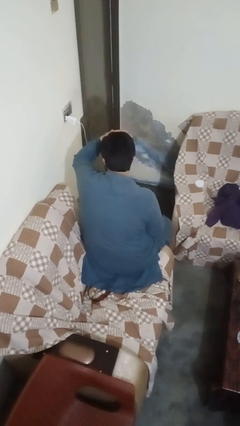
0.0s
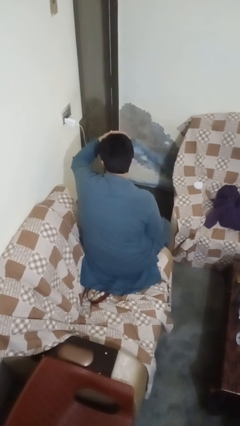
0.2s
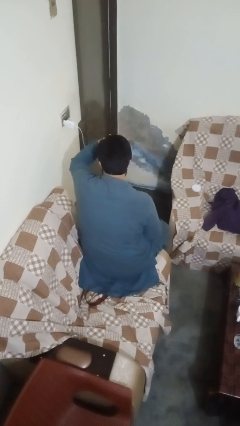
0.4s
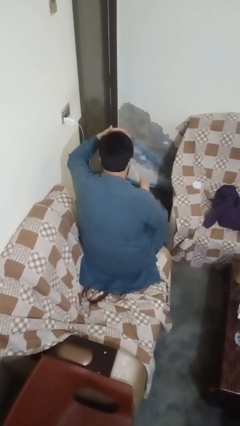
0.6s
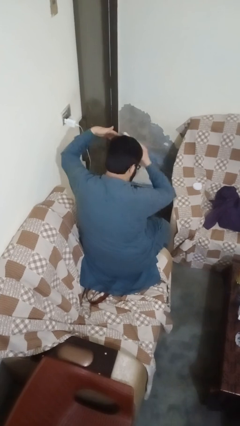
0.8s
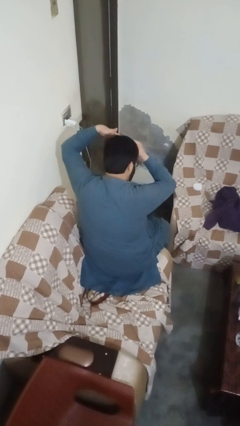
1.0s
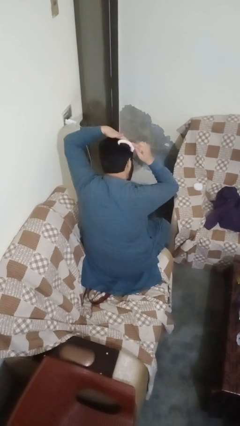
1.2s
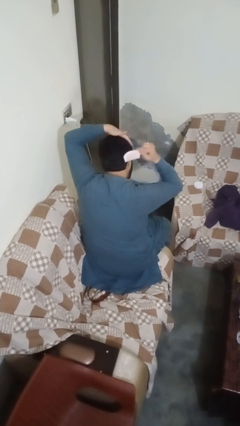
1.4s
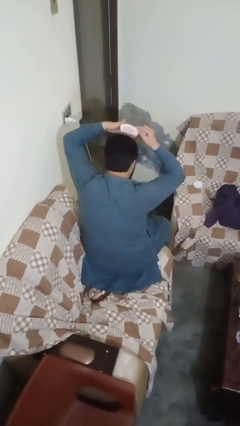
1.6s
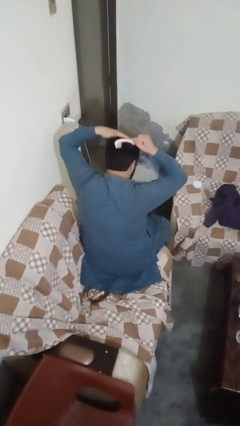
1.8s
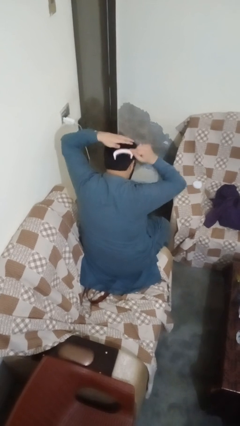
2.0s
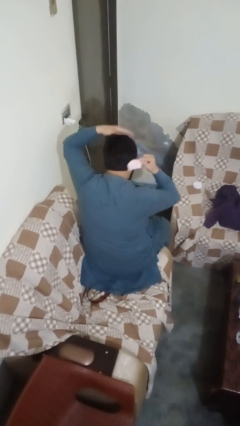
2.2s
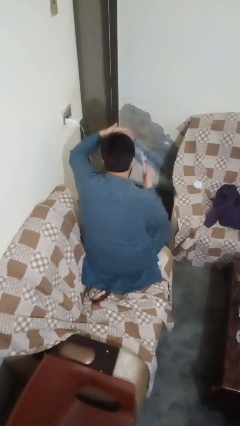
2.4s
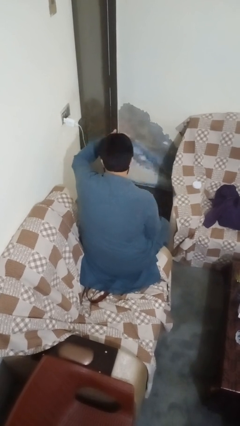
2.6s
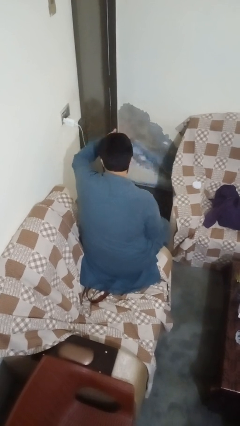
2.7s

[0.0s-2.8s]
person brushes hair

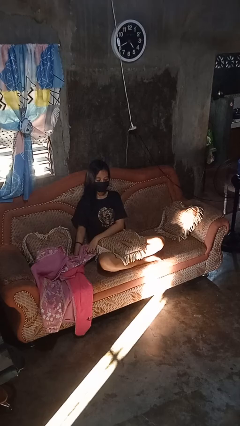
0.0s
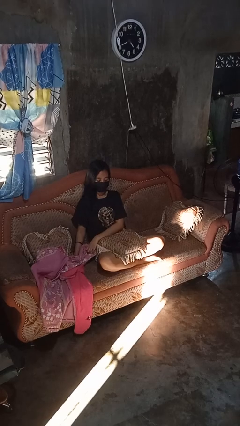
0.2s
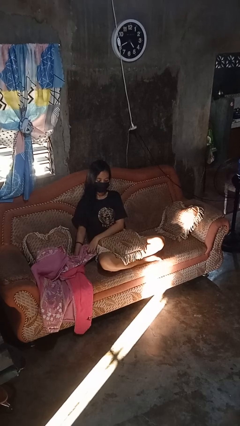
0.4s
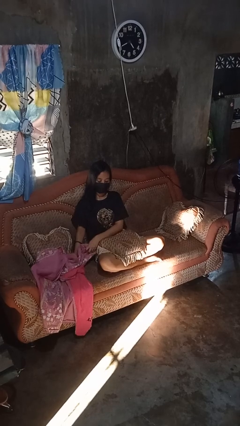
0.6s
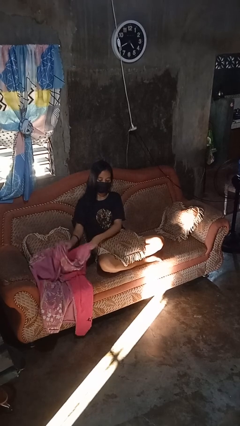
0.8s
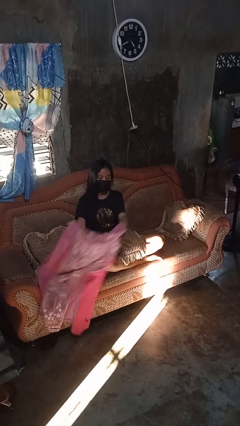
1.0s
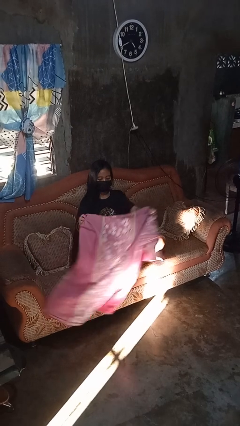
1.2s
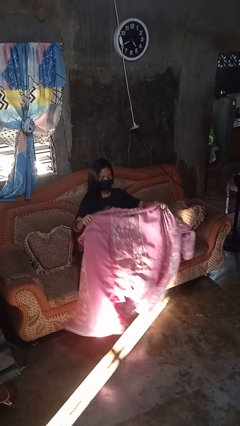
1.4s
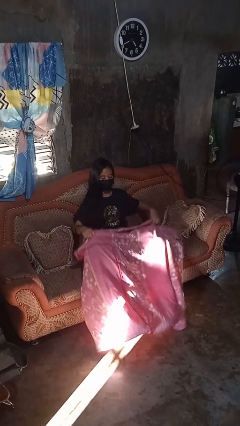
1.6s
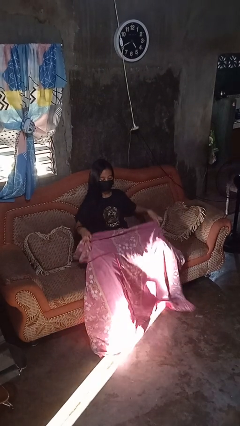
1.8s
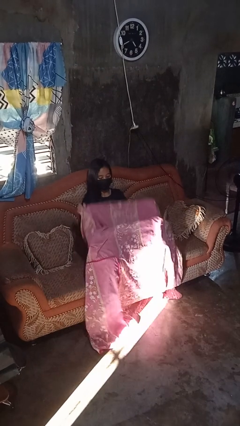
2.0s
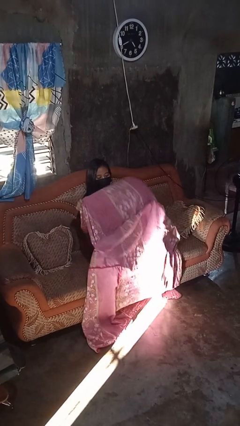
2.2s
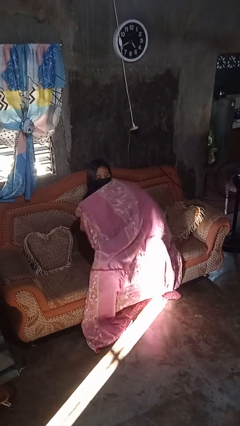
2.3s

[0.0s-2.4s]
person covers with blanket

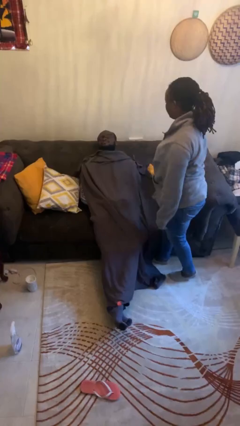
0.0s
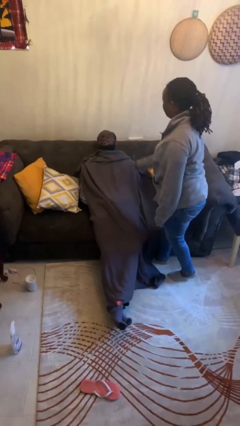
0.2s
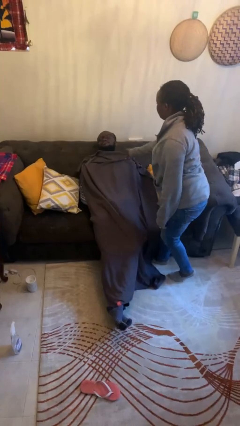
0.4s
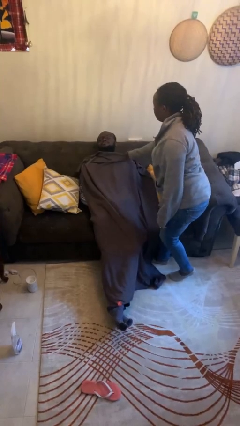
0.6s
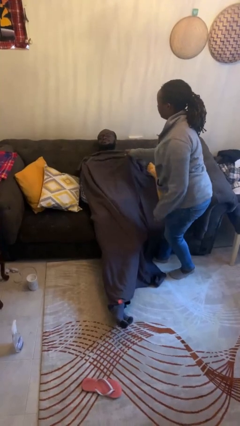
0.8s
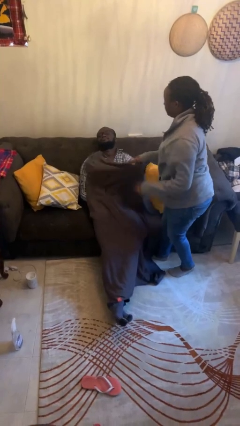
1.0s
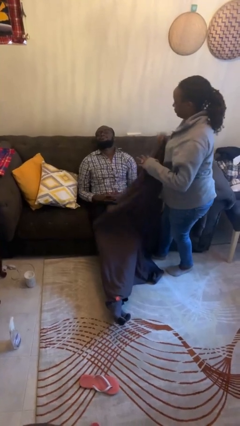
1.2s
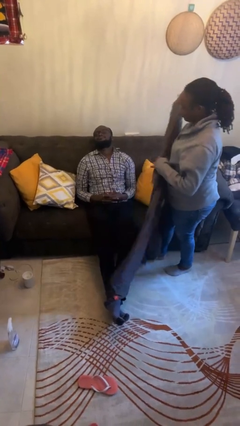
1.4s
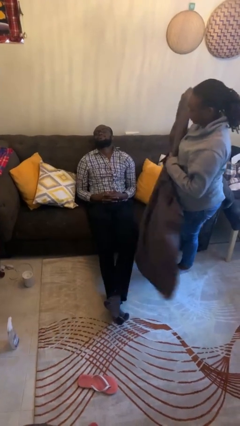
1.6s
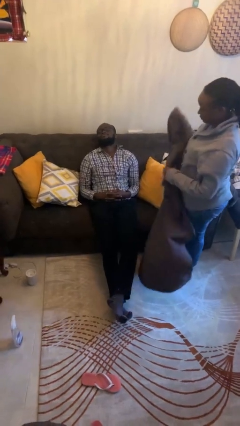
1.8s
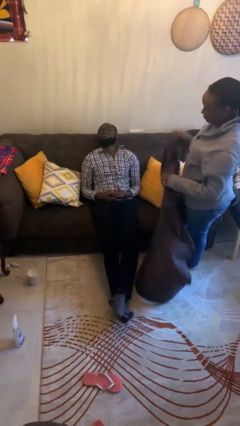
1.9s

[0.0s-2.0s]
person uncovers friend with blanket

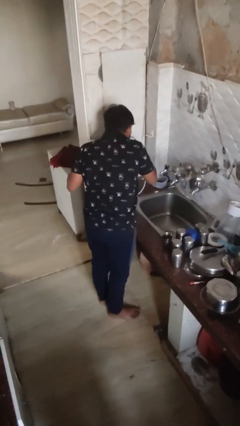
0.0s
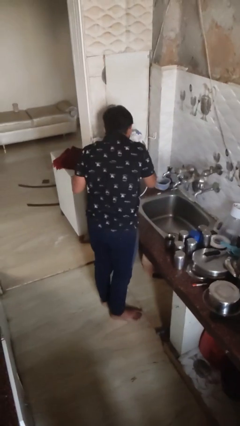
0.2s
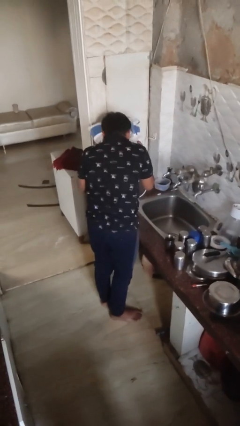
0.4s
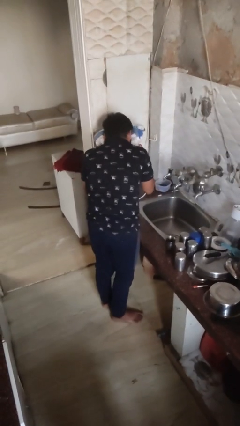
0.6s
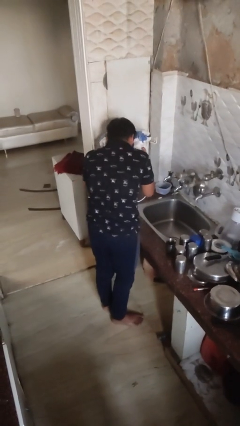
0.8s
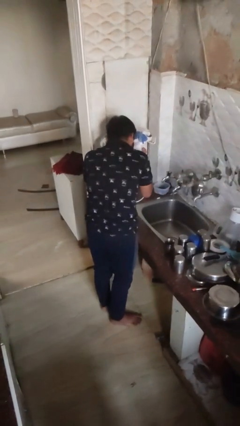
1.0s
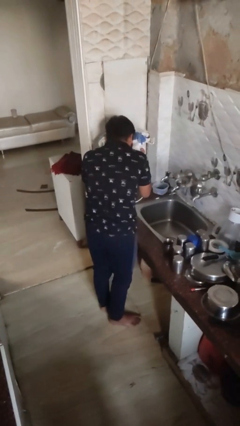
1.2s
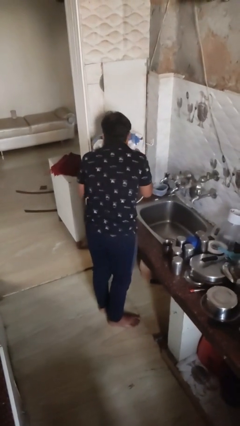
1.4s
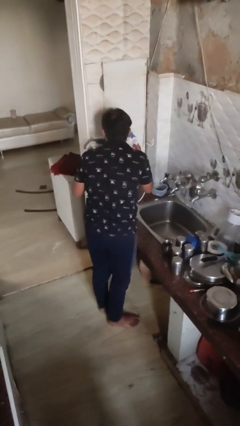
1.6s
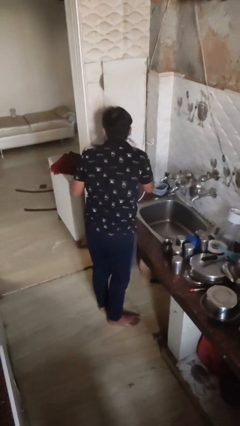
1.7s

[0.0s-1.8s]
person dries face with towel

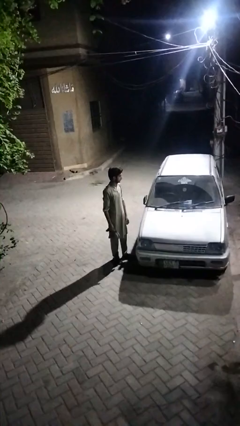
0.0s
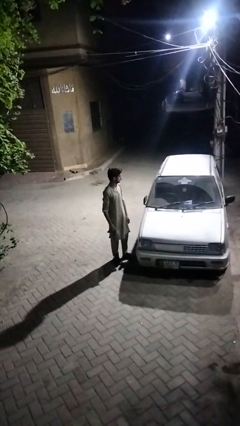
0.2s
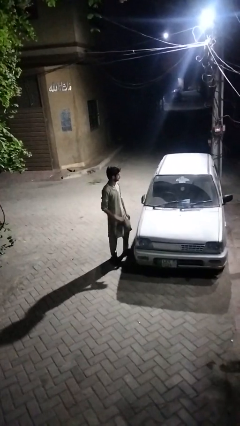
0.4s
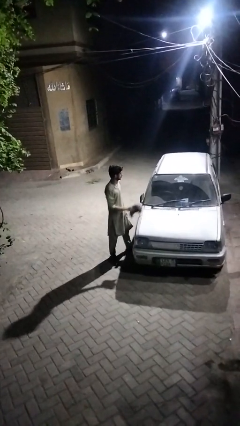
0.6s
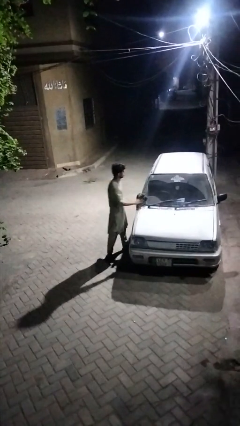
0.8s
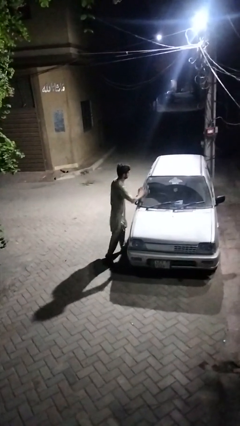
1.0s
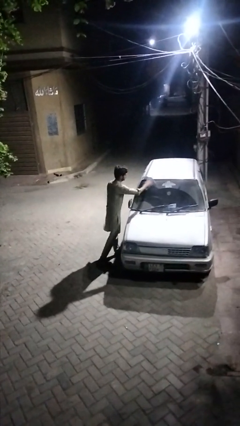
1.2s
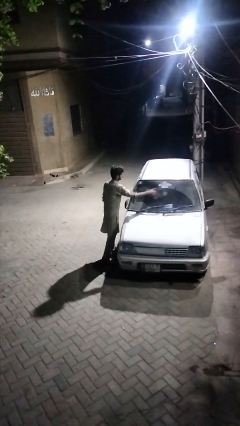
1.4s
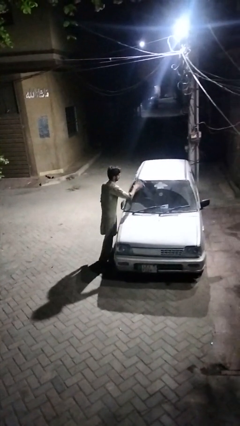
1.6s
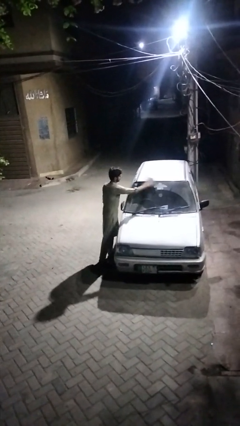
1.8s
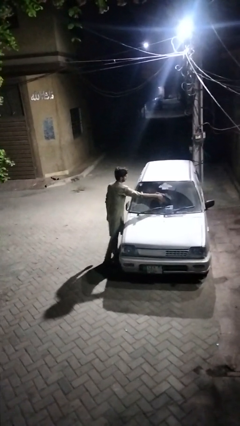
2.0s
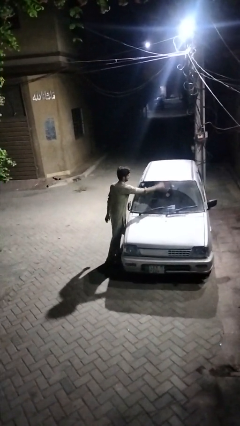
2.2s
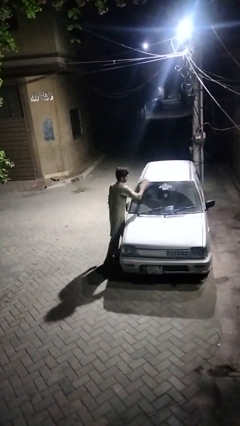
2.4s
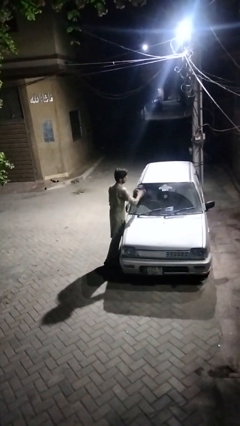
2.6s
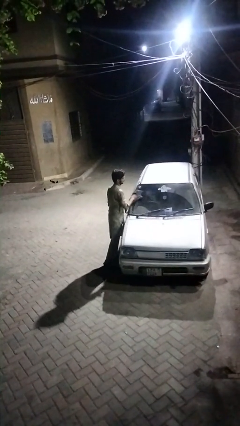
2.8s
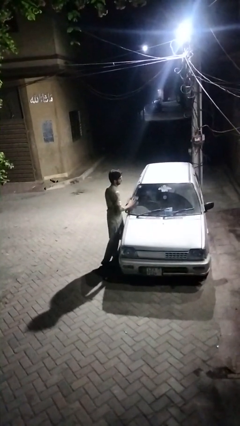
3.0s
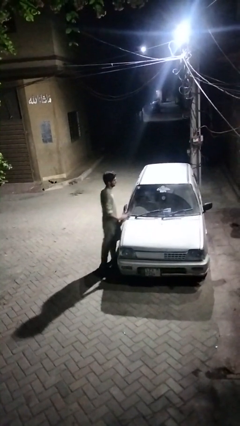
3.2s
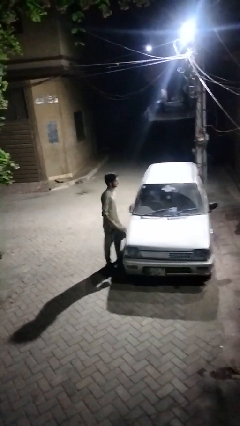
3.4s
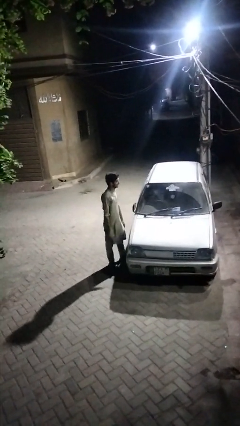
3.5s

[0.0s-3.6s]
person polishes car with rag

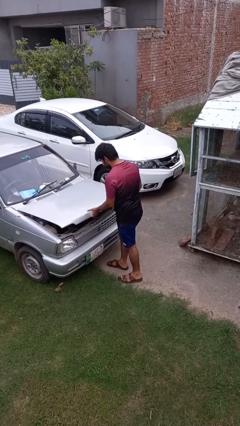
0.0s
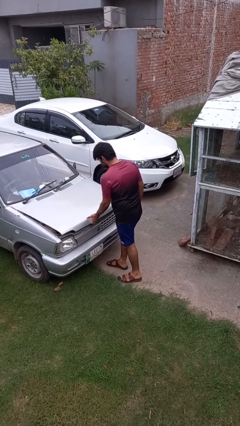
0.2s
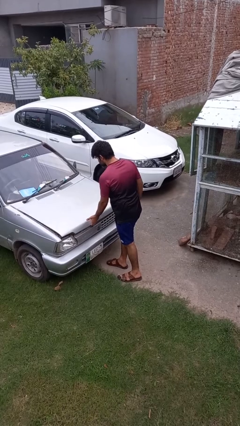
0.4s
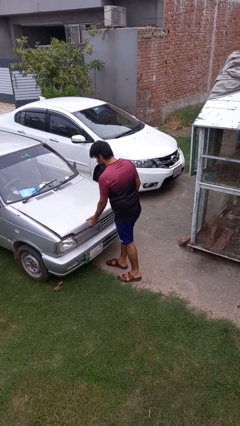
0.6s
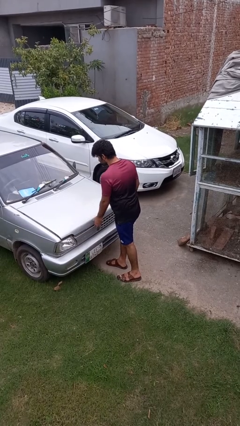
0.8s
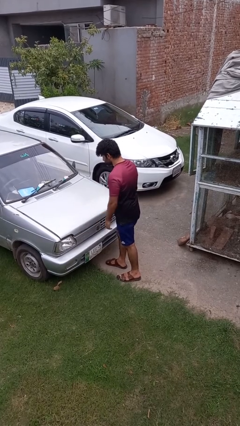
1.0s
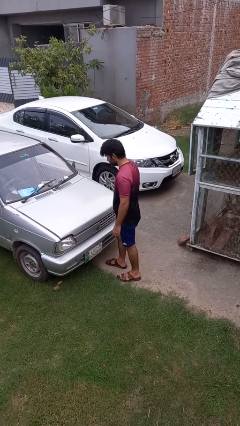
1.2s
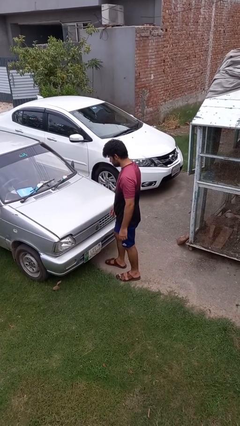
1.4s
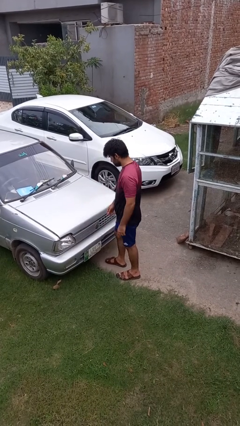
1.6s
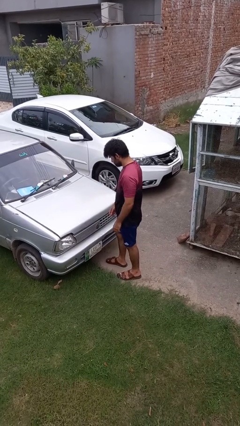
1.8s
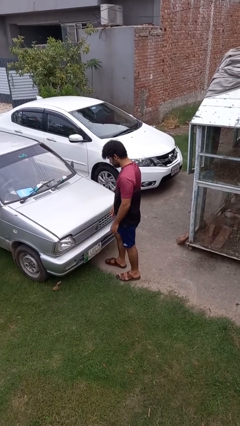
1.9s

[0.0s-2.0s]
person closes car hood

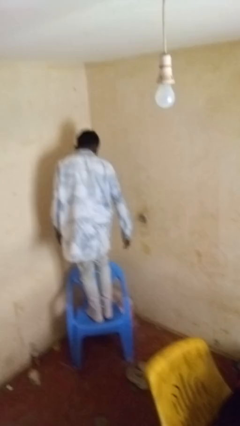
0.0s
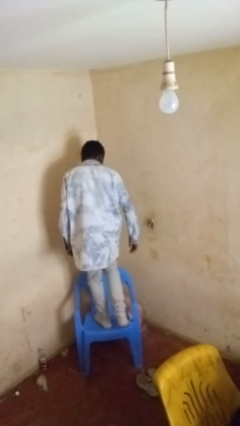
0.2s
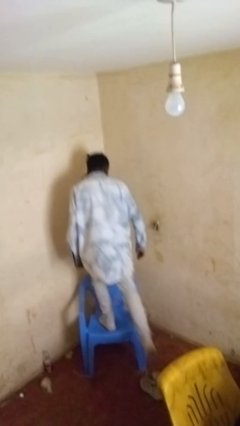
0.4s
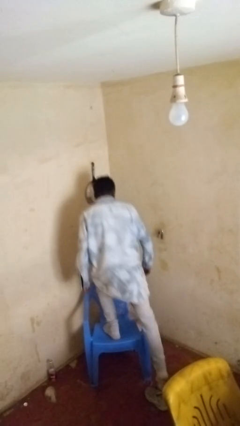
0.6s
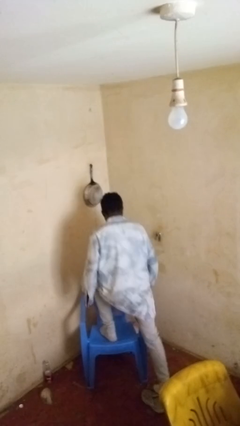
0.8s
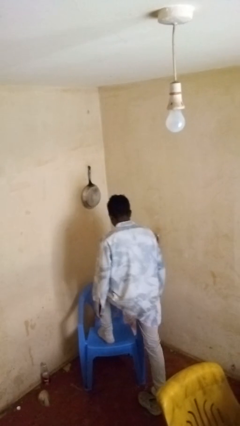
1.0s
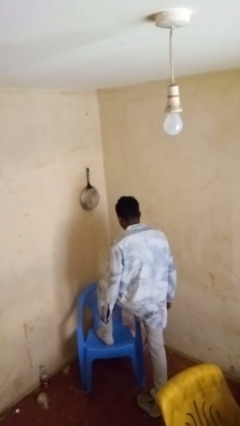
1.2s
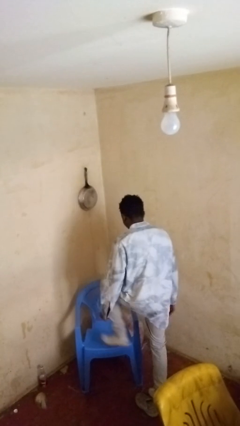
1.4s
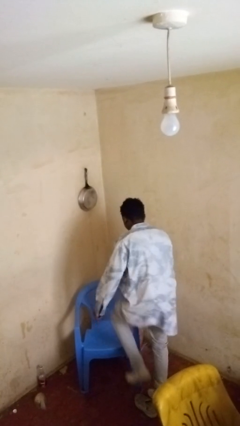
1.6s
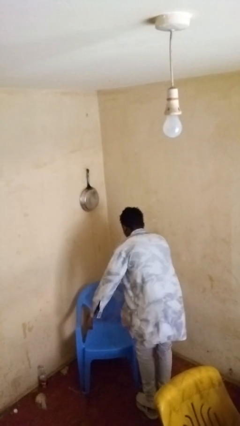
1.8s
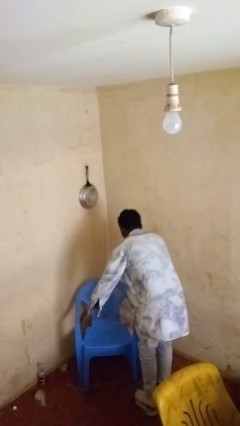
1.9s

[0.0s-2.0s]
person climbs off chair

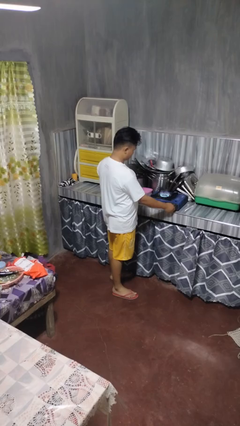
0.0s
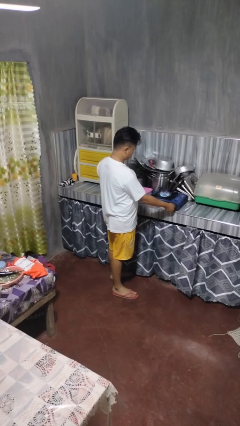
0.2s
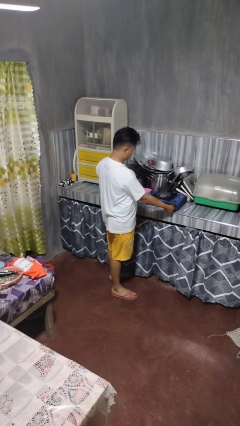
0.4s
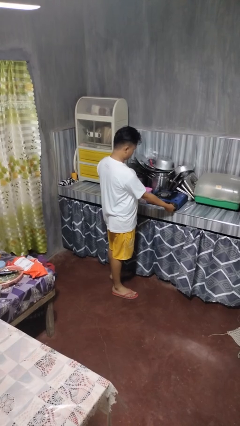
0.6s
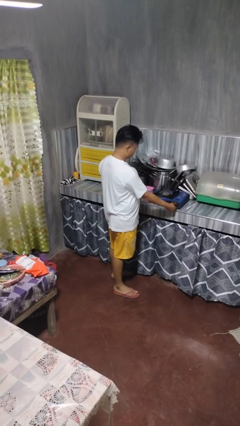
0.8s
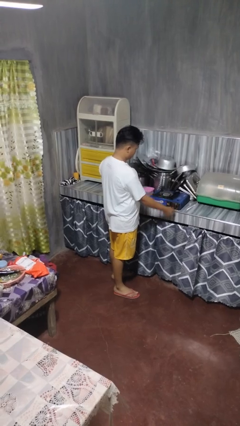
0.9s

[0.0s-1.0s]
person turns off stovetop
